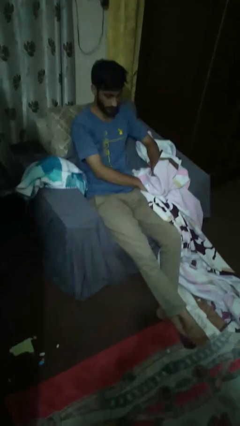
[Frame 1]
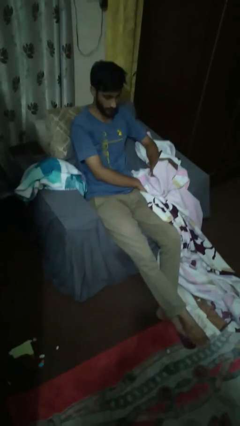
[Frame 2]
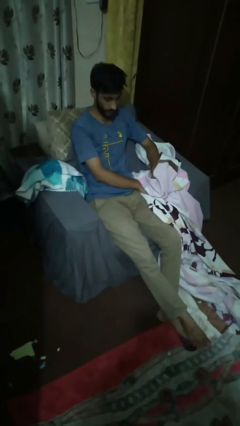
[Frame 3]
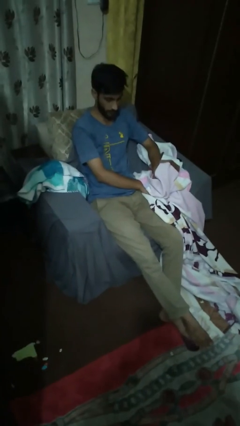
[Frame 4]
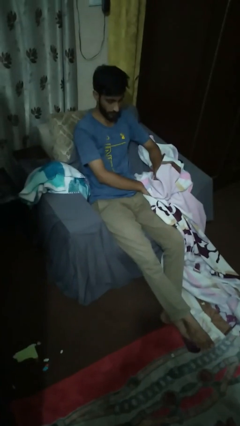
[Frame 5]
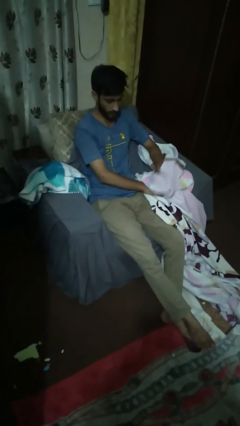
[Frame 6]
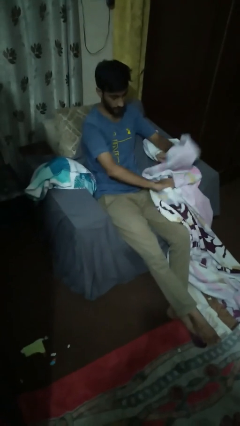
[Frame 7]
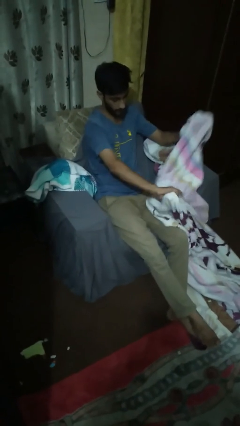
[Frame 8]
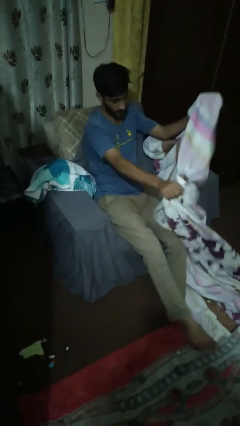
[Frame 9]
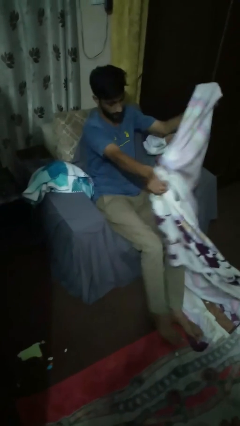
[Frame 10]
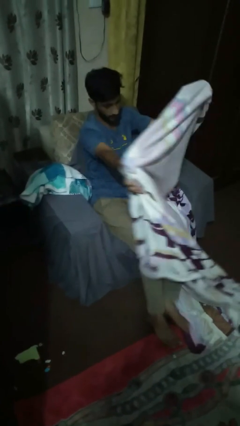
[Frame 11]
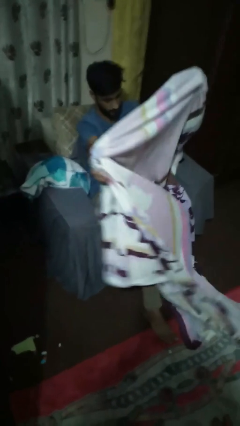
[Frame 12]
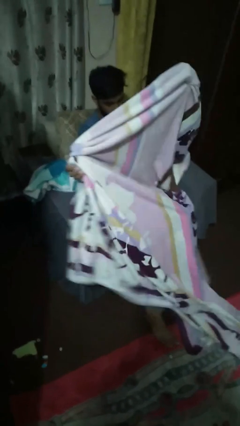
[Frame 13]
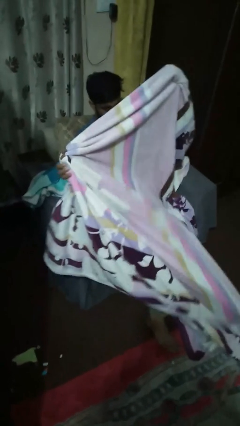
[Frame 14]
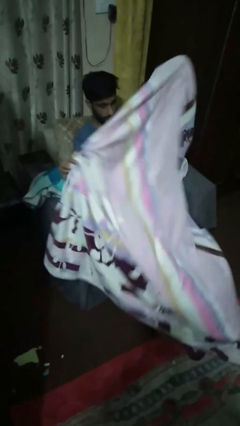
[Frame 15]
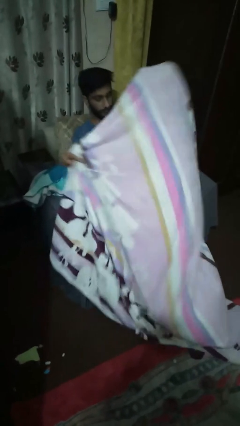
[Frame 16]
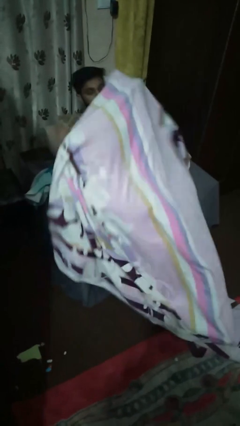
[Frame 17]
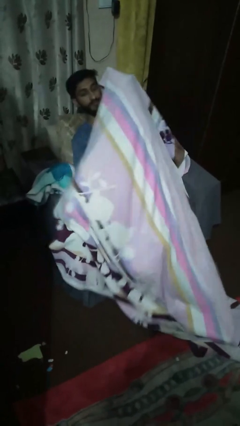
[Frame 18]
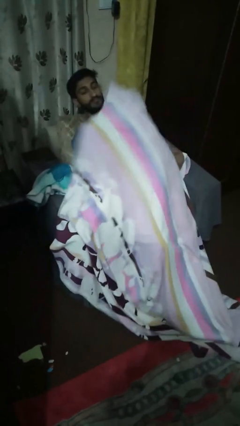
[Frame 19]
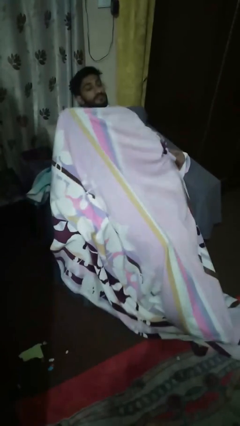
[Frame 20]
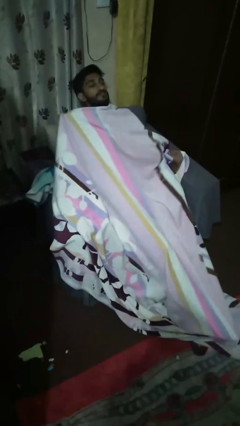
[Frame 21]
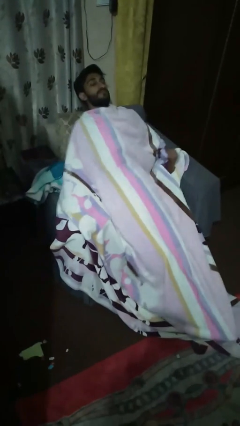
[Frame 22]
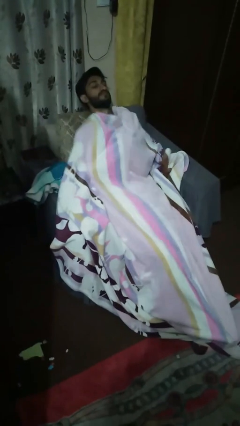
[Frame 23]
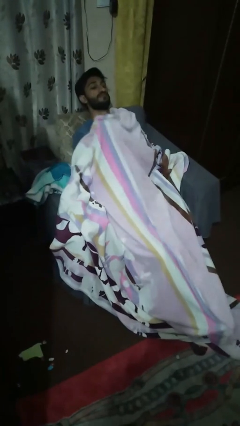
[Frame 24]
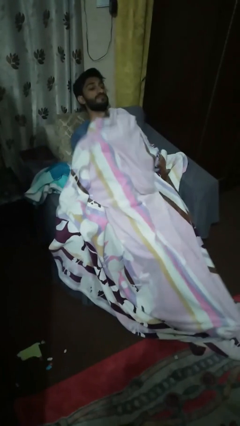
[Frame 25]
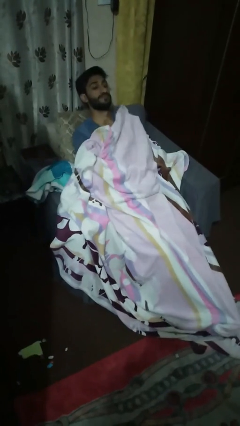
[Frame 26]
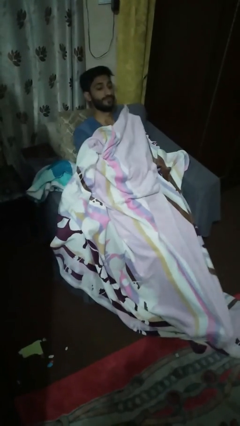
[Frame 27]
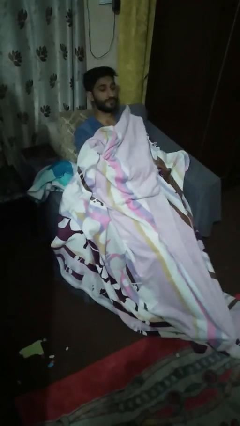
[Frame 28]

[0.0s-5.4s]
person covers with blanket

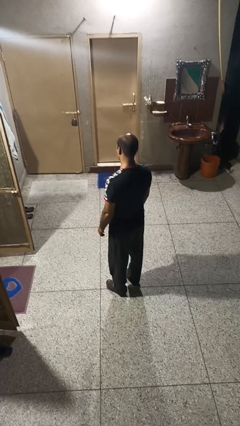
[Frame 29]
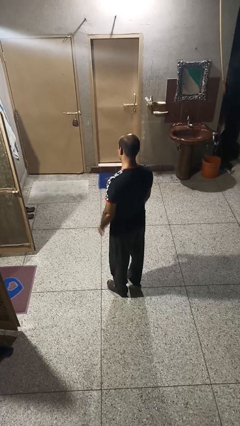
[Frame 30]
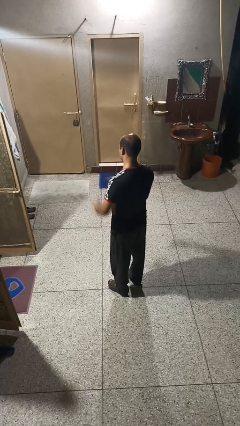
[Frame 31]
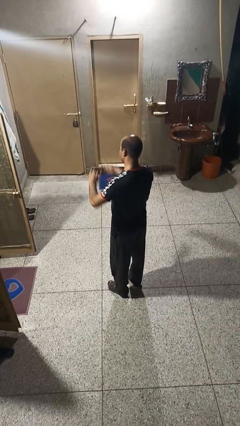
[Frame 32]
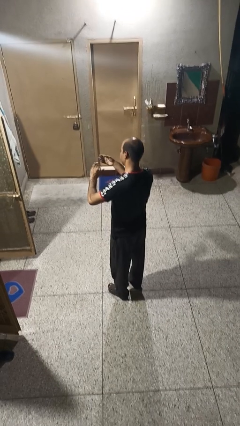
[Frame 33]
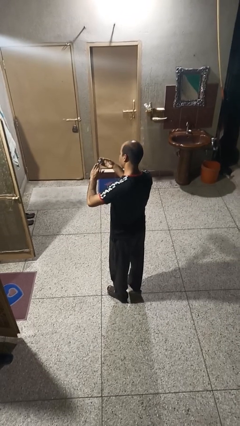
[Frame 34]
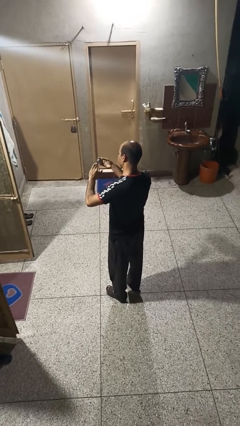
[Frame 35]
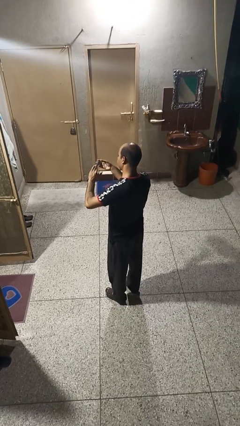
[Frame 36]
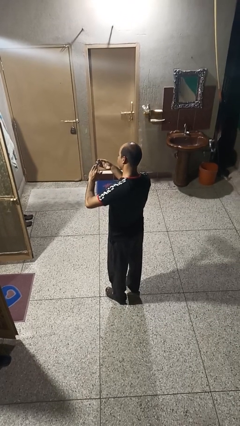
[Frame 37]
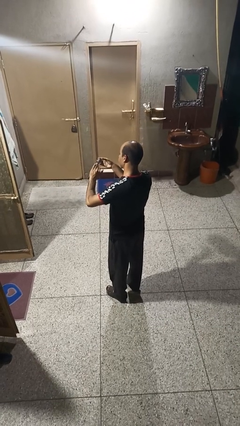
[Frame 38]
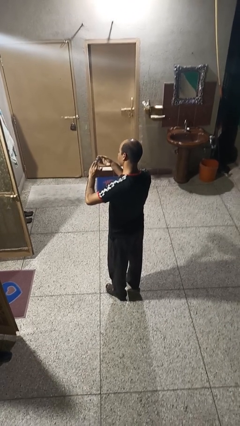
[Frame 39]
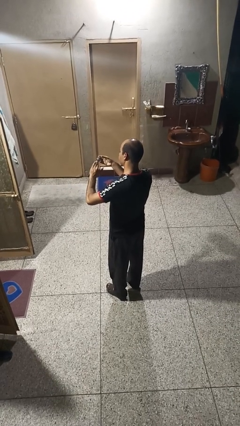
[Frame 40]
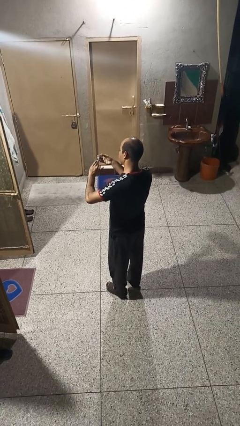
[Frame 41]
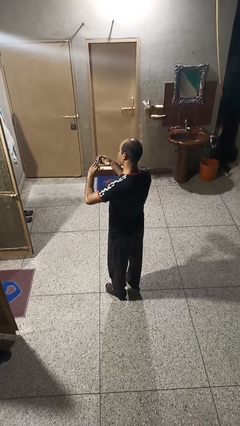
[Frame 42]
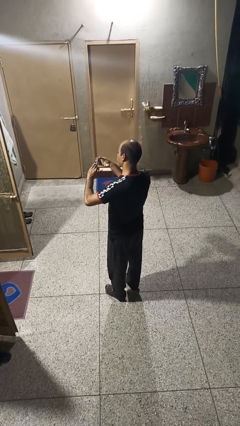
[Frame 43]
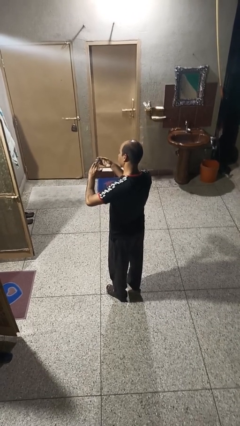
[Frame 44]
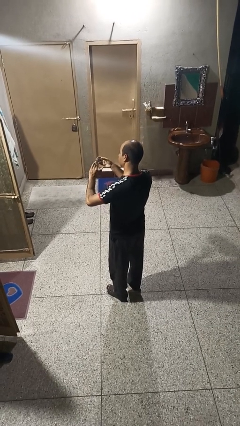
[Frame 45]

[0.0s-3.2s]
person clips fingernails

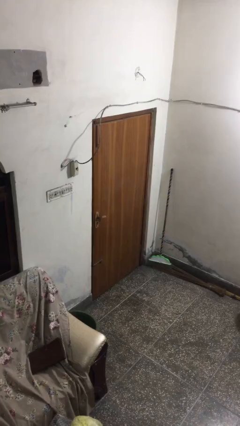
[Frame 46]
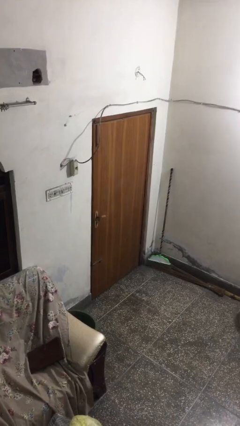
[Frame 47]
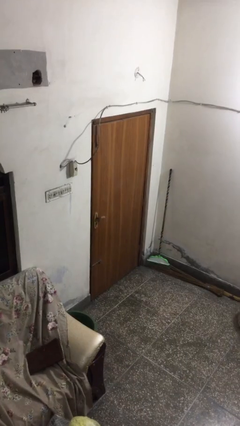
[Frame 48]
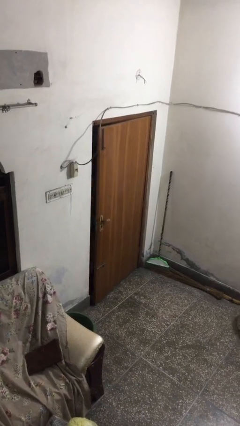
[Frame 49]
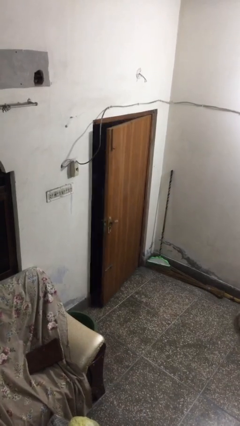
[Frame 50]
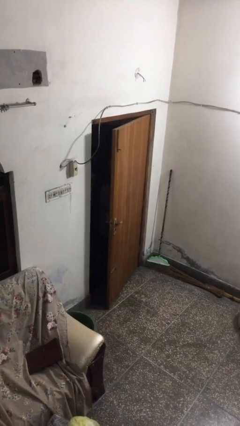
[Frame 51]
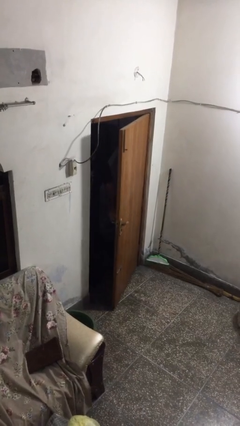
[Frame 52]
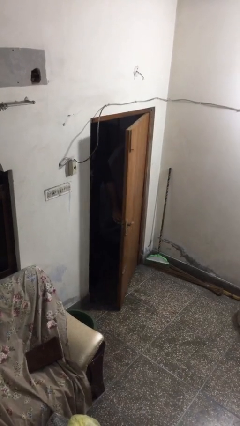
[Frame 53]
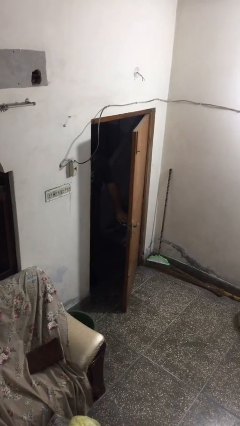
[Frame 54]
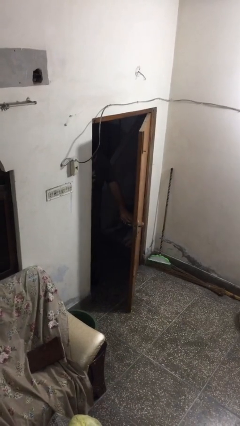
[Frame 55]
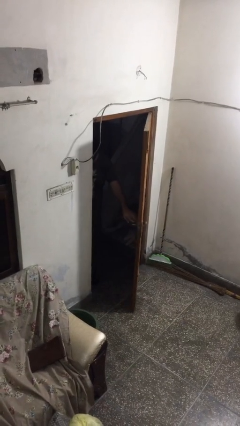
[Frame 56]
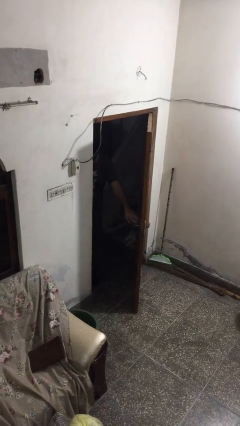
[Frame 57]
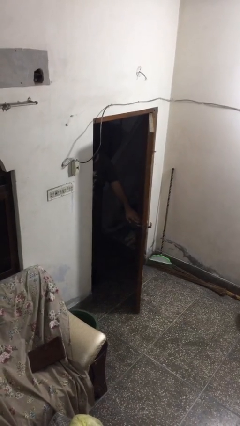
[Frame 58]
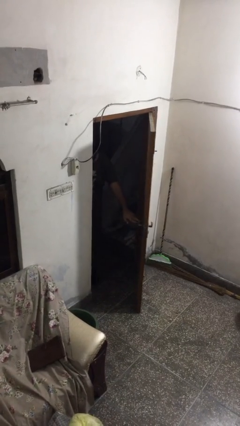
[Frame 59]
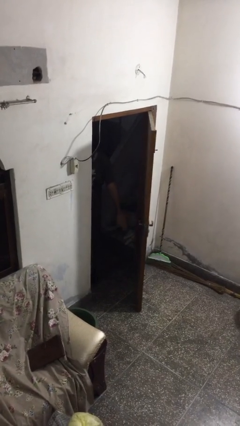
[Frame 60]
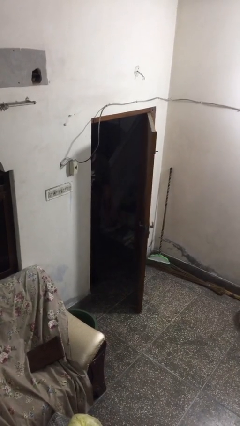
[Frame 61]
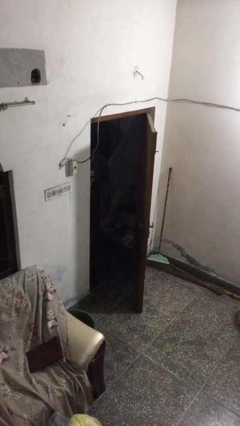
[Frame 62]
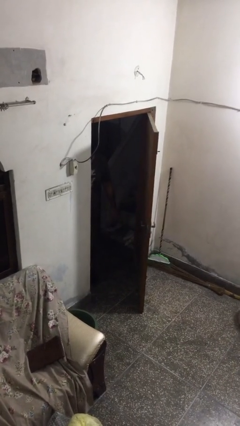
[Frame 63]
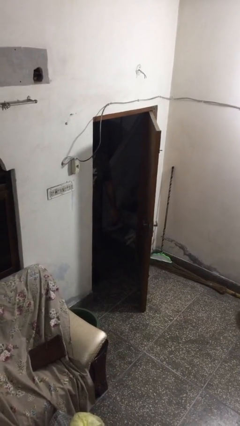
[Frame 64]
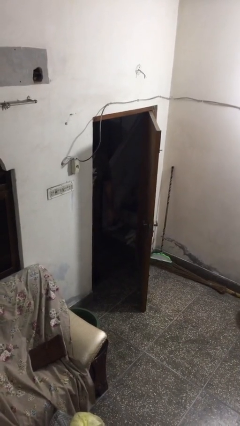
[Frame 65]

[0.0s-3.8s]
person opens facility door

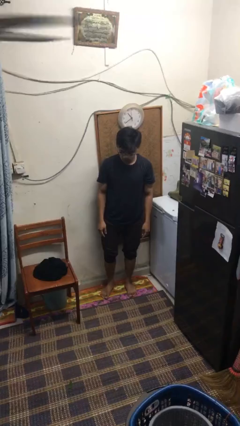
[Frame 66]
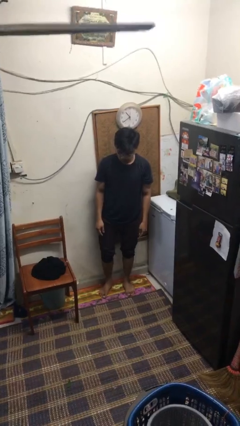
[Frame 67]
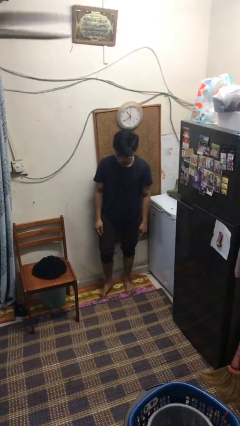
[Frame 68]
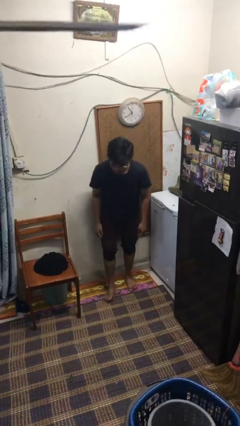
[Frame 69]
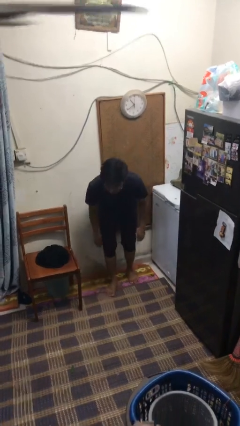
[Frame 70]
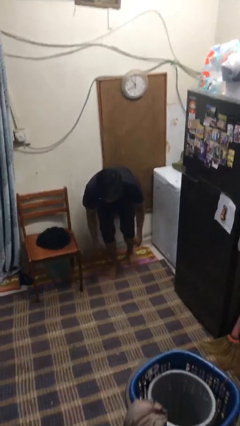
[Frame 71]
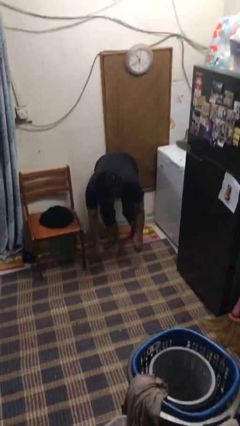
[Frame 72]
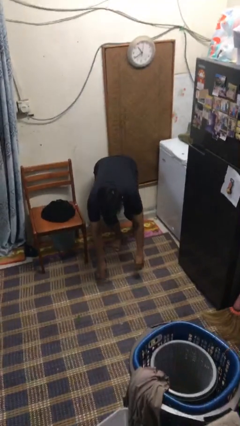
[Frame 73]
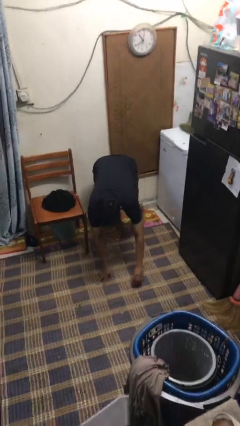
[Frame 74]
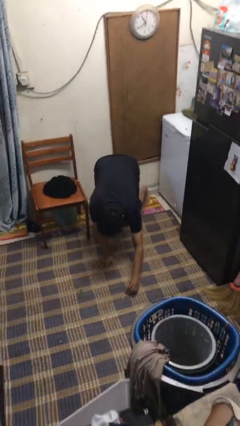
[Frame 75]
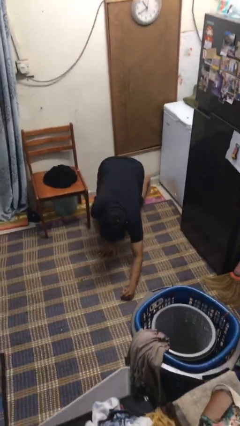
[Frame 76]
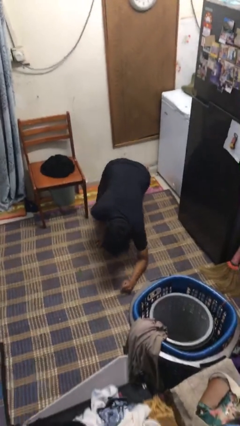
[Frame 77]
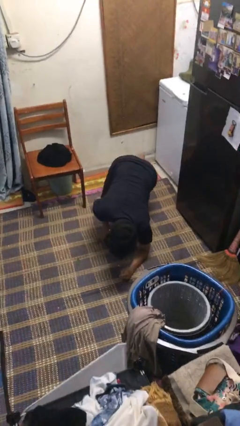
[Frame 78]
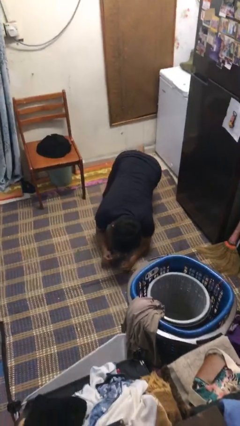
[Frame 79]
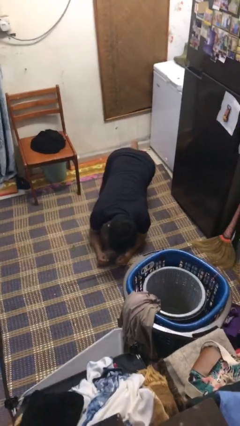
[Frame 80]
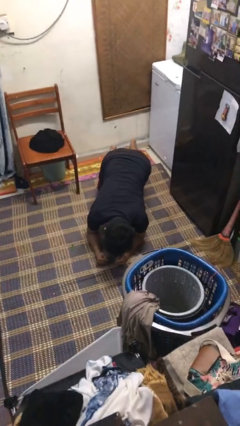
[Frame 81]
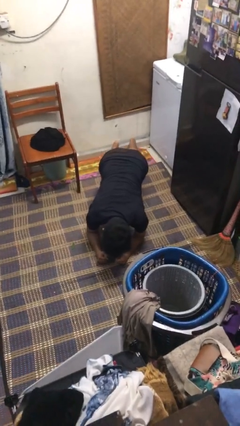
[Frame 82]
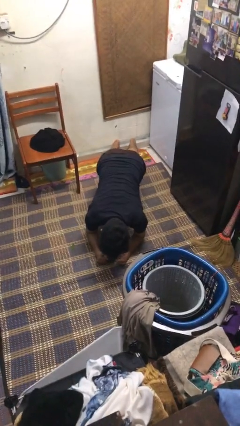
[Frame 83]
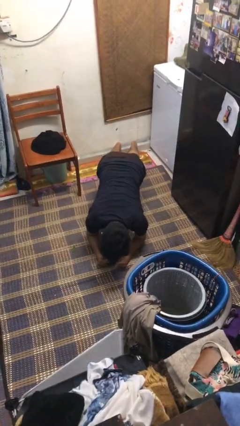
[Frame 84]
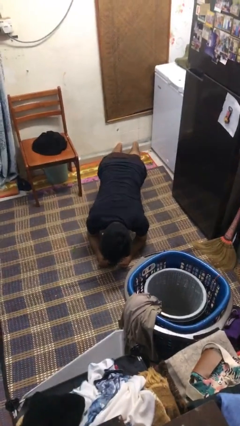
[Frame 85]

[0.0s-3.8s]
person exercises with plank

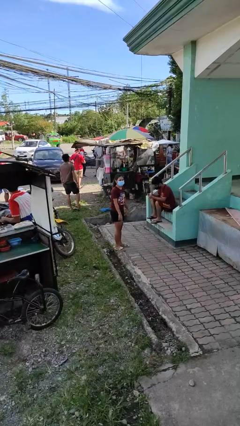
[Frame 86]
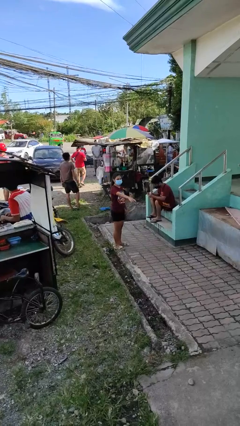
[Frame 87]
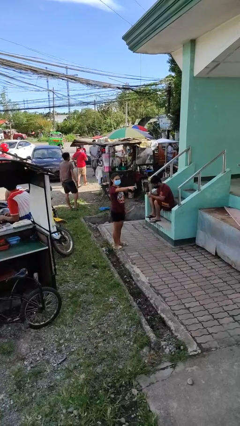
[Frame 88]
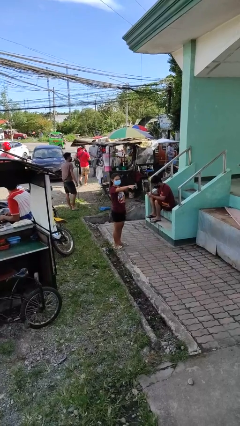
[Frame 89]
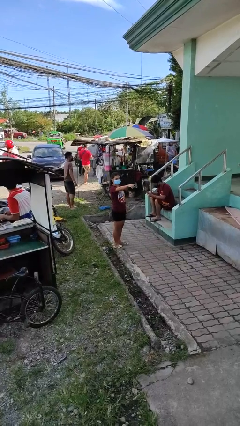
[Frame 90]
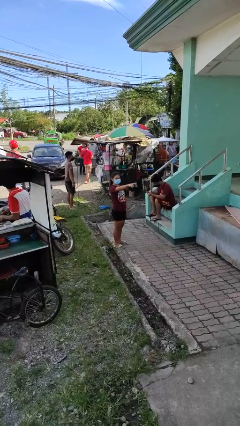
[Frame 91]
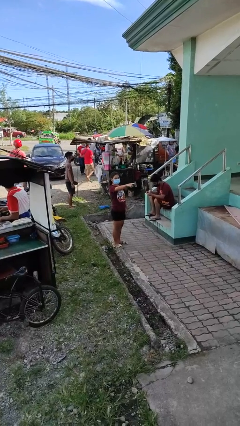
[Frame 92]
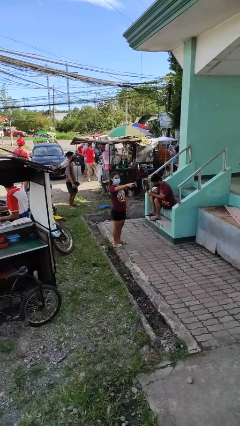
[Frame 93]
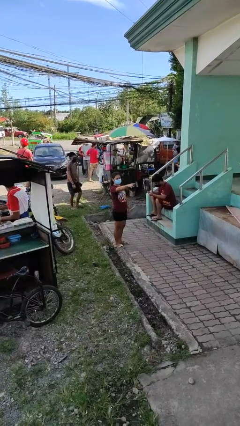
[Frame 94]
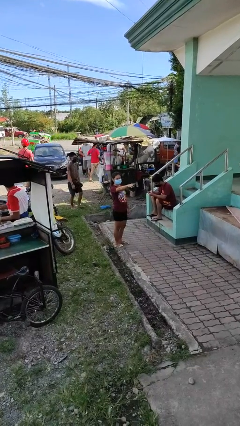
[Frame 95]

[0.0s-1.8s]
person points at person
